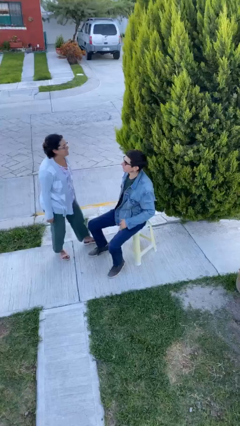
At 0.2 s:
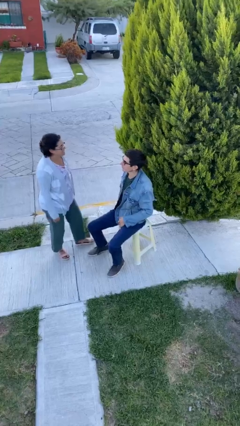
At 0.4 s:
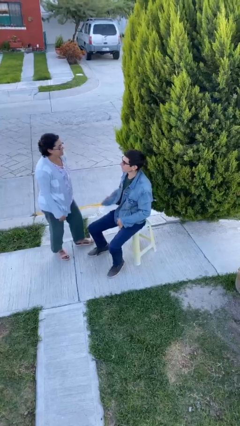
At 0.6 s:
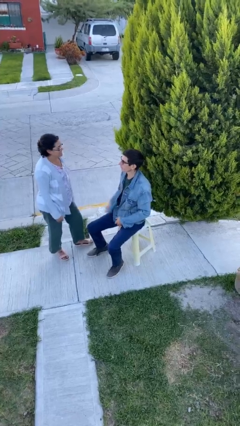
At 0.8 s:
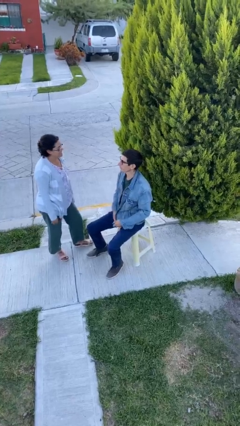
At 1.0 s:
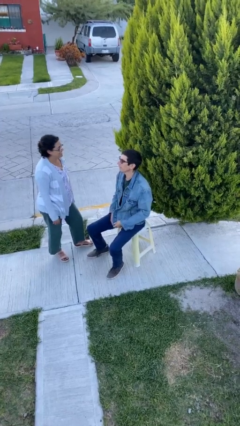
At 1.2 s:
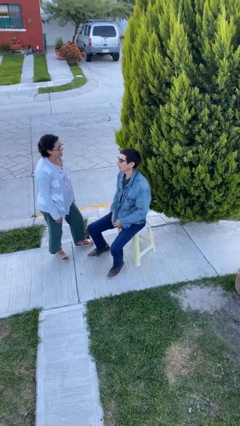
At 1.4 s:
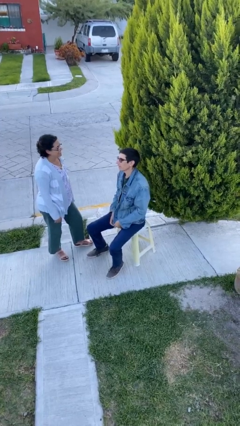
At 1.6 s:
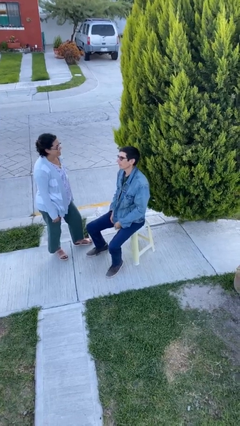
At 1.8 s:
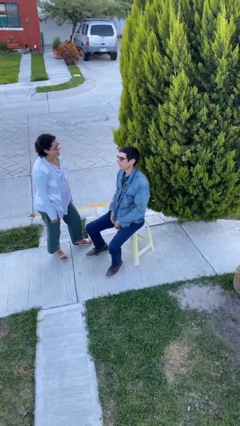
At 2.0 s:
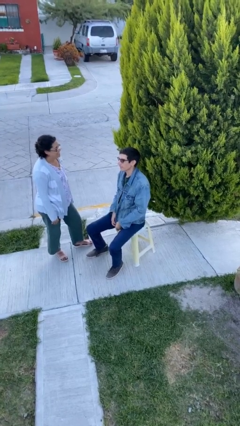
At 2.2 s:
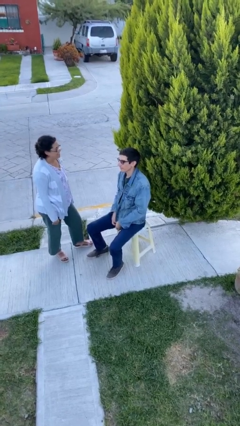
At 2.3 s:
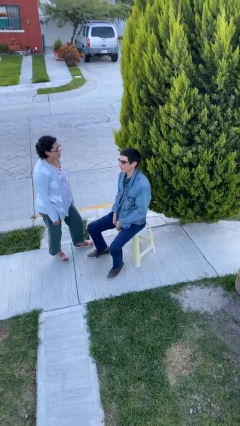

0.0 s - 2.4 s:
person talks to person

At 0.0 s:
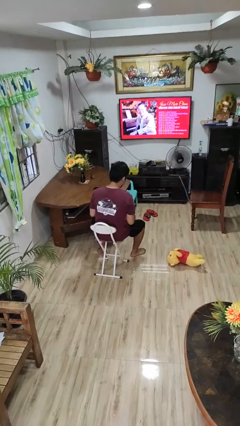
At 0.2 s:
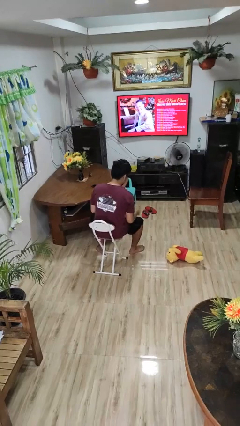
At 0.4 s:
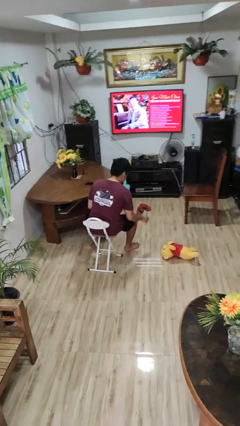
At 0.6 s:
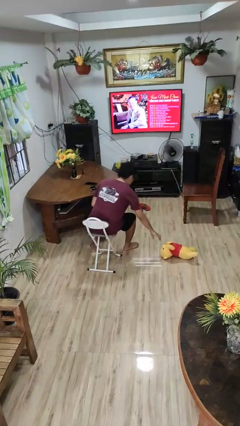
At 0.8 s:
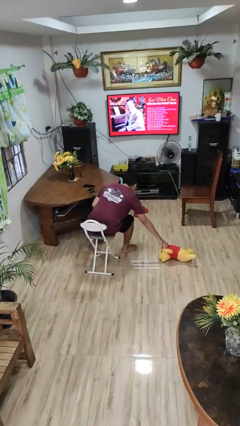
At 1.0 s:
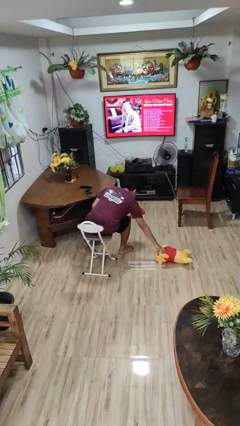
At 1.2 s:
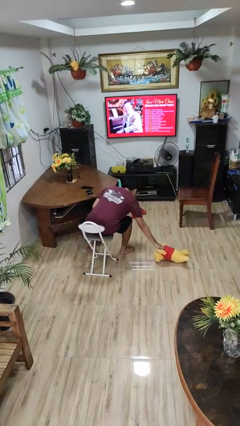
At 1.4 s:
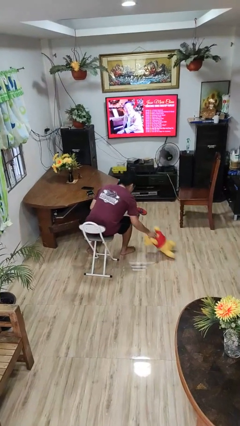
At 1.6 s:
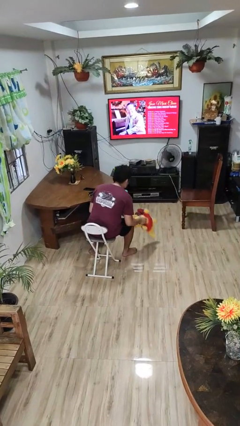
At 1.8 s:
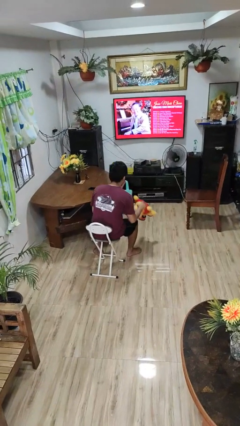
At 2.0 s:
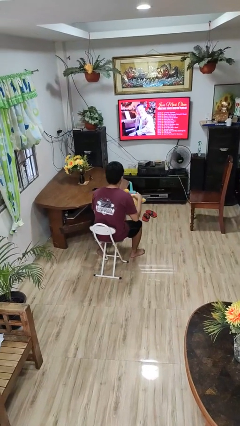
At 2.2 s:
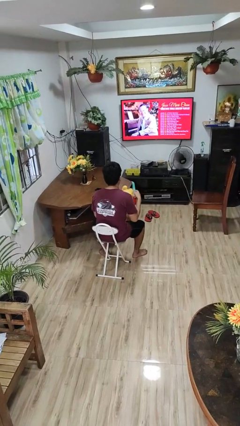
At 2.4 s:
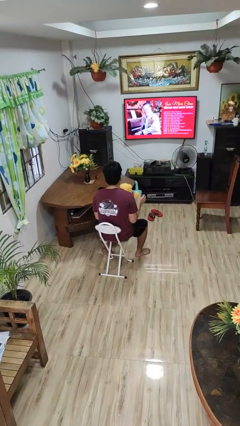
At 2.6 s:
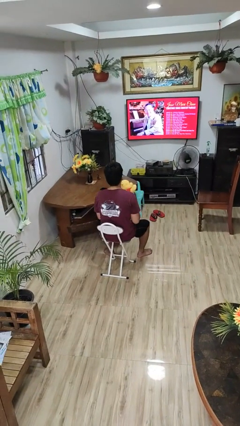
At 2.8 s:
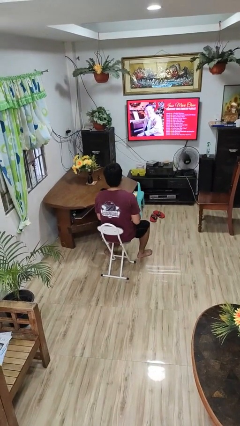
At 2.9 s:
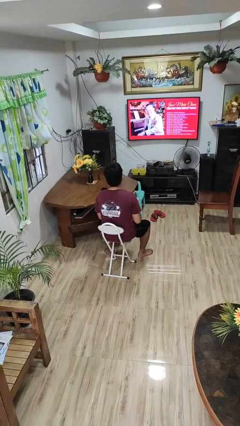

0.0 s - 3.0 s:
person picks up object from floor

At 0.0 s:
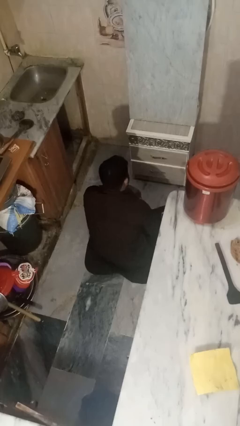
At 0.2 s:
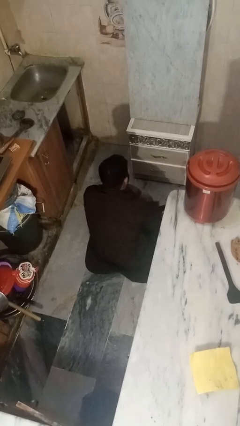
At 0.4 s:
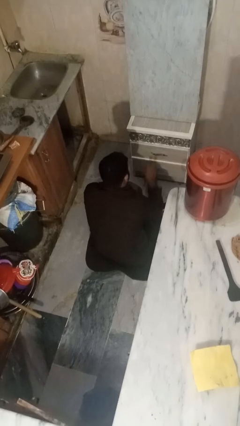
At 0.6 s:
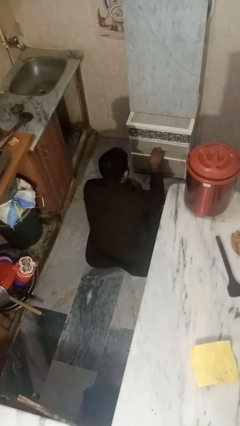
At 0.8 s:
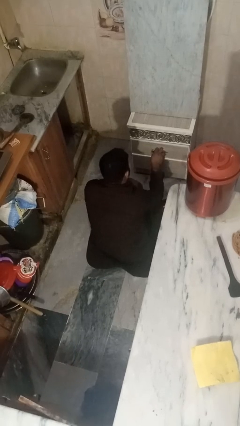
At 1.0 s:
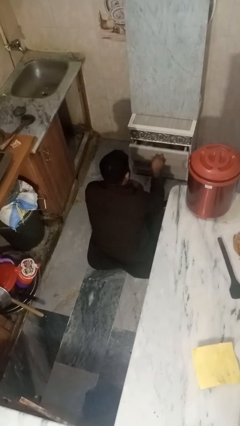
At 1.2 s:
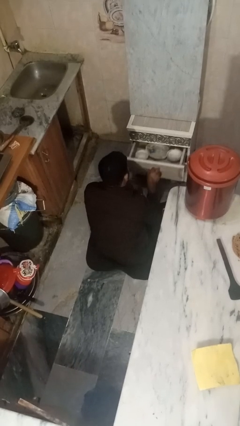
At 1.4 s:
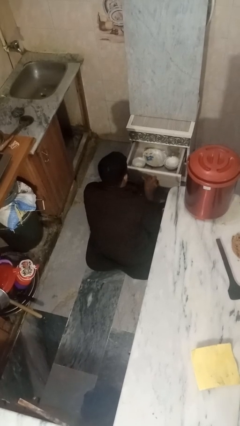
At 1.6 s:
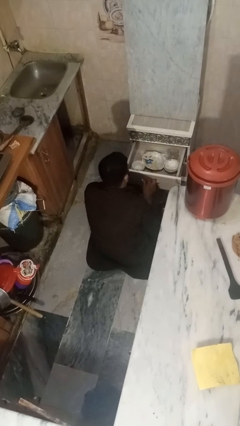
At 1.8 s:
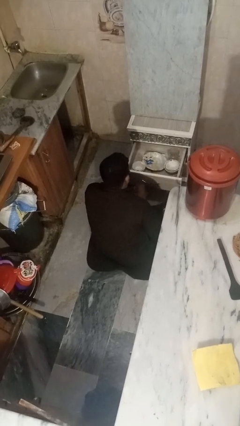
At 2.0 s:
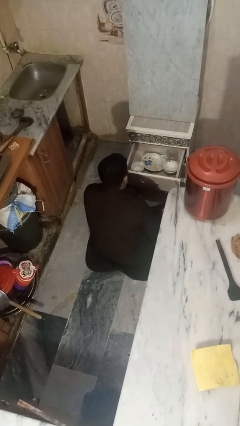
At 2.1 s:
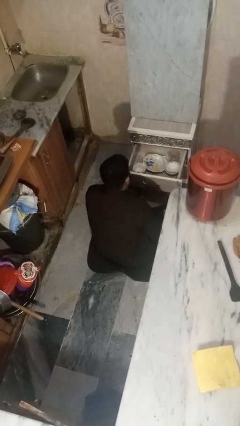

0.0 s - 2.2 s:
person opens kitchen drawer

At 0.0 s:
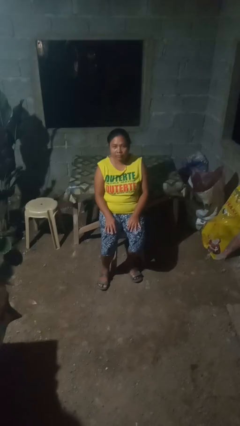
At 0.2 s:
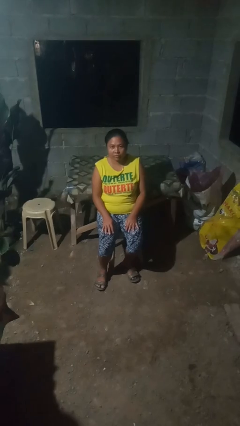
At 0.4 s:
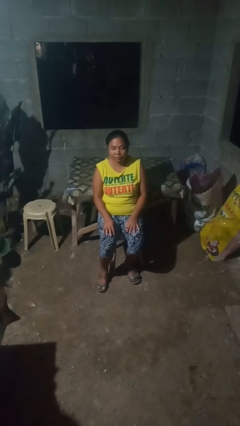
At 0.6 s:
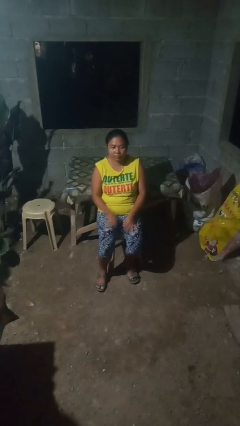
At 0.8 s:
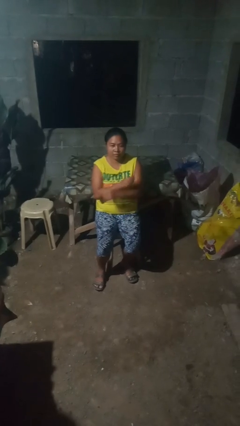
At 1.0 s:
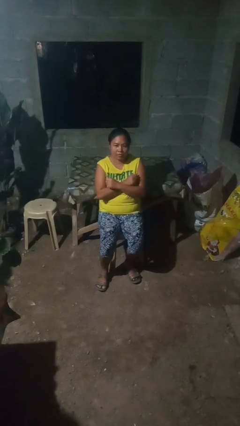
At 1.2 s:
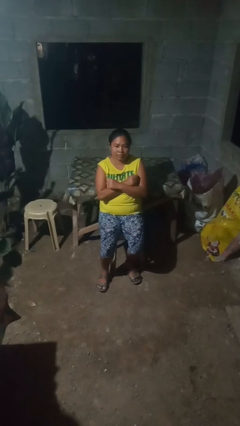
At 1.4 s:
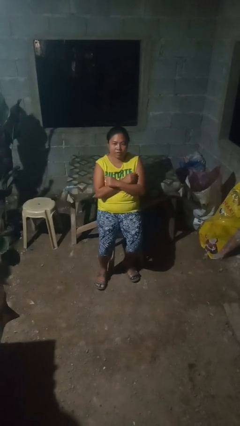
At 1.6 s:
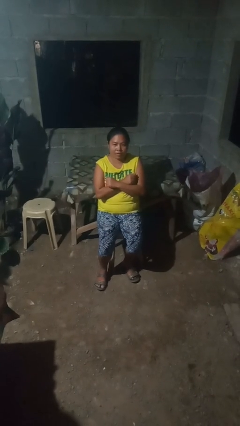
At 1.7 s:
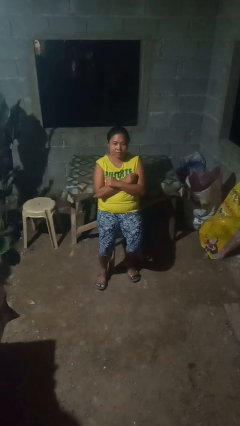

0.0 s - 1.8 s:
person crosses arms

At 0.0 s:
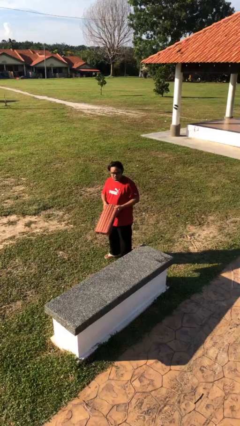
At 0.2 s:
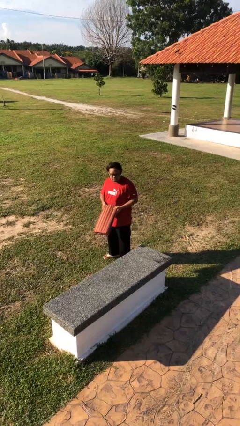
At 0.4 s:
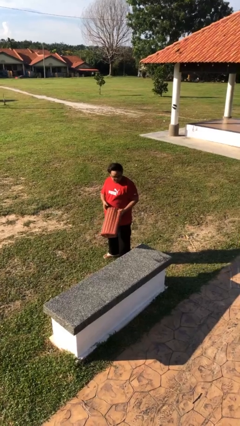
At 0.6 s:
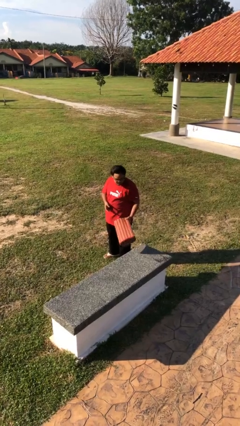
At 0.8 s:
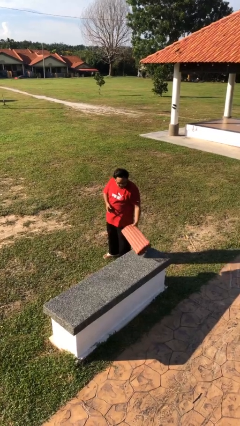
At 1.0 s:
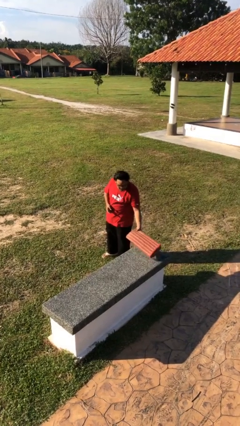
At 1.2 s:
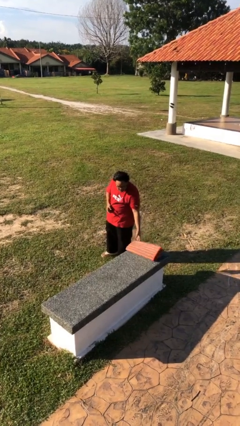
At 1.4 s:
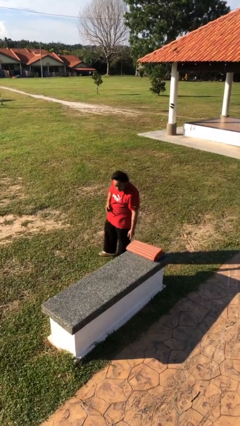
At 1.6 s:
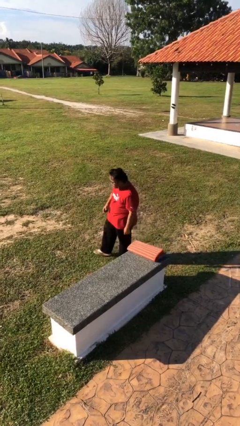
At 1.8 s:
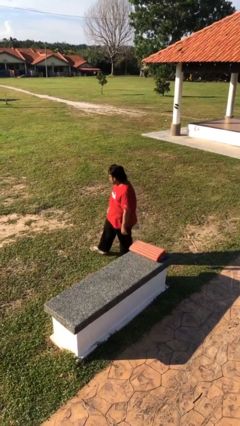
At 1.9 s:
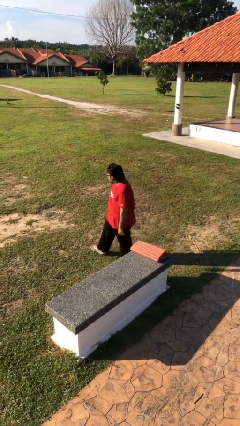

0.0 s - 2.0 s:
person puts down object on table

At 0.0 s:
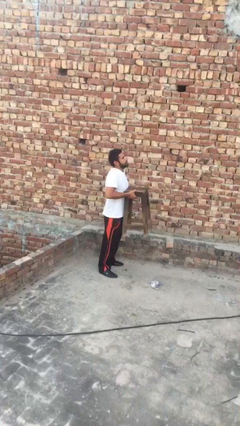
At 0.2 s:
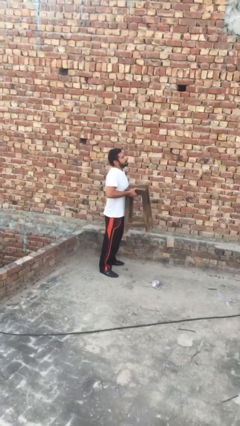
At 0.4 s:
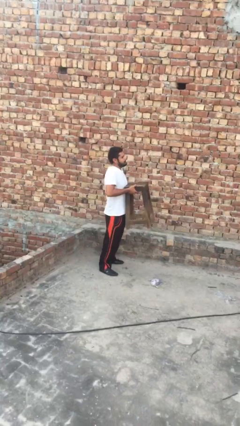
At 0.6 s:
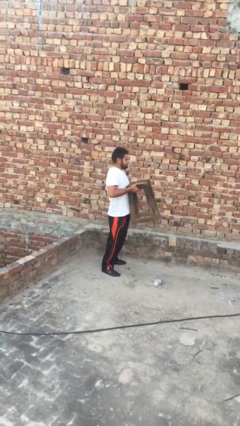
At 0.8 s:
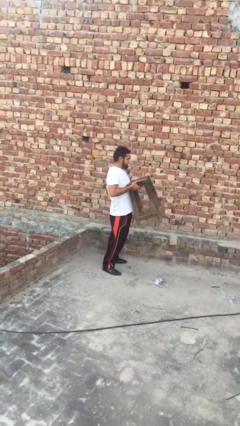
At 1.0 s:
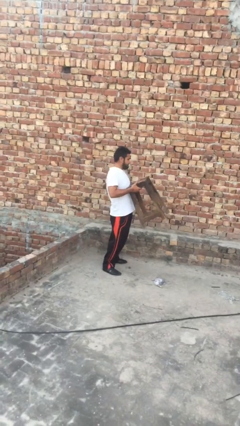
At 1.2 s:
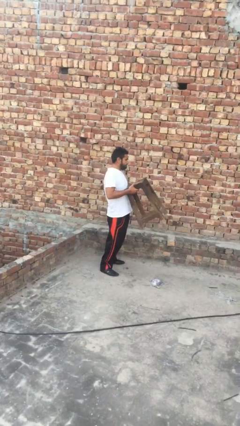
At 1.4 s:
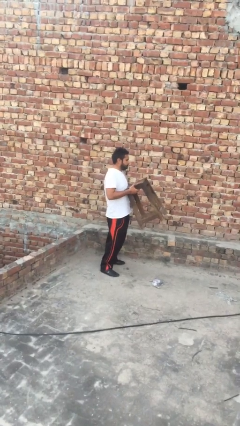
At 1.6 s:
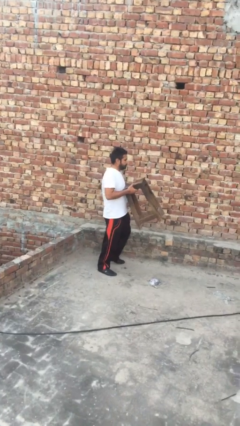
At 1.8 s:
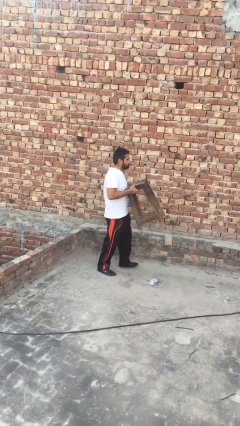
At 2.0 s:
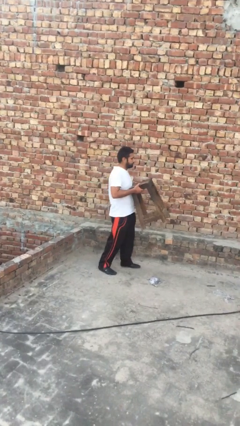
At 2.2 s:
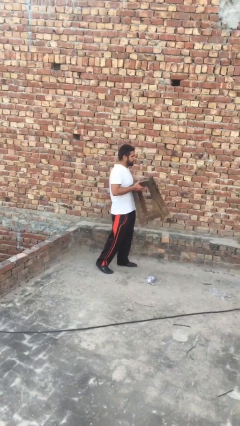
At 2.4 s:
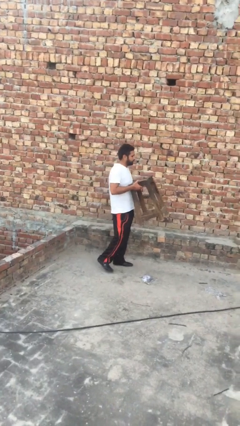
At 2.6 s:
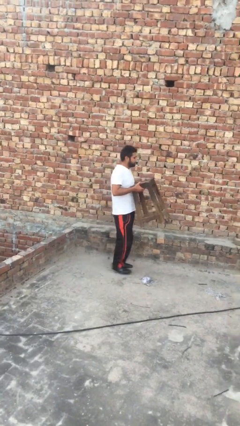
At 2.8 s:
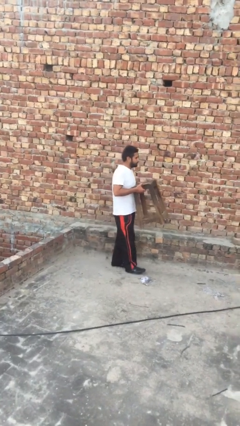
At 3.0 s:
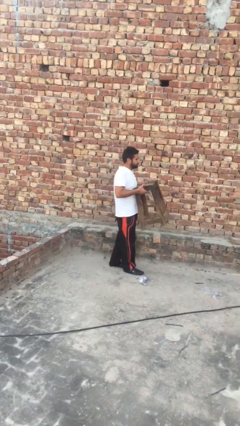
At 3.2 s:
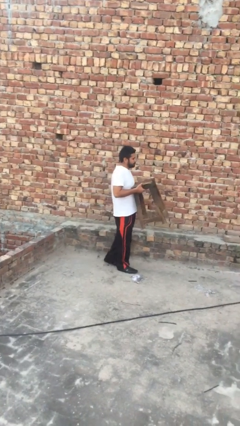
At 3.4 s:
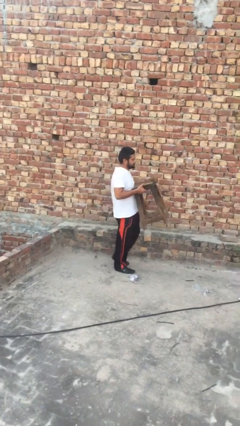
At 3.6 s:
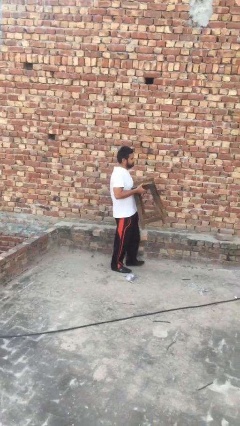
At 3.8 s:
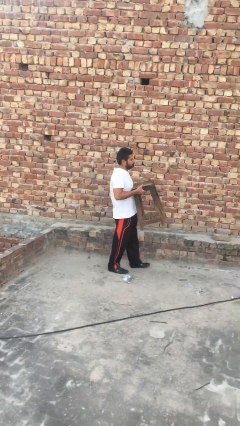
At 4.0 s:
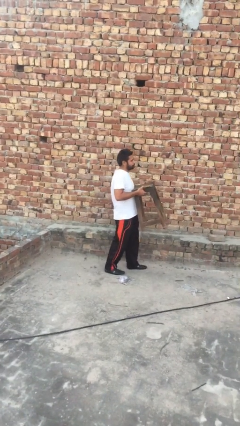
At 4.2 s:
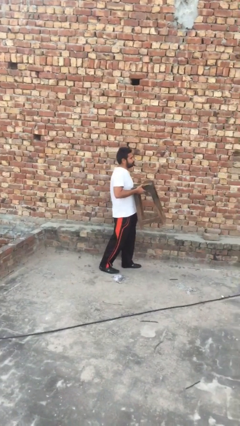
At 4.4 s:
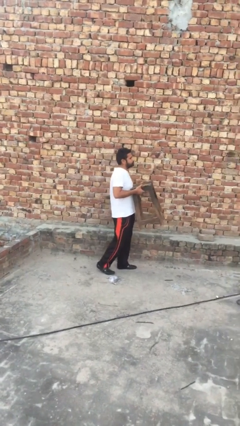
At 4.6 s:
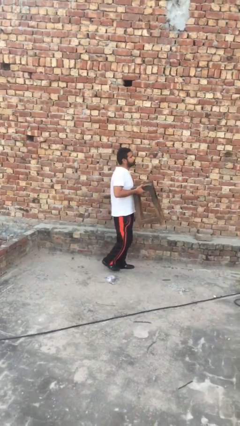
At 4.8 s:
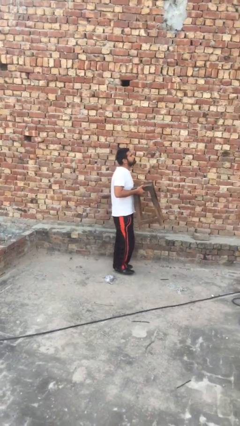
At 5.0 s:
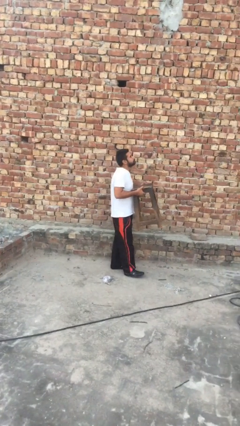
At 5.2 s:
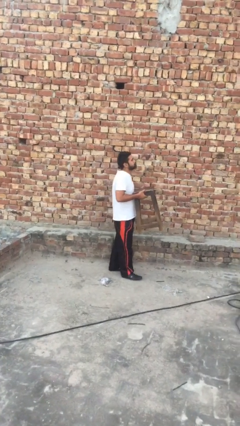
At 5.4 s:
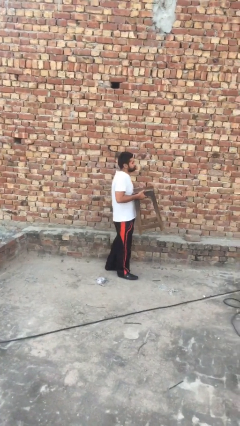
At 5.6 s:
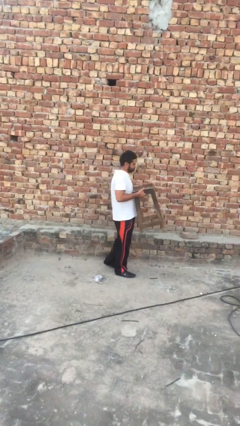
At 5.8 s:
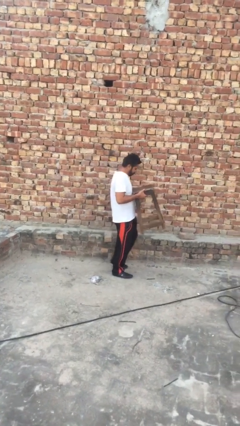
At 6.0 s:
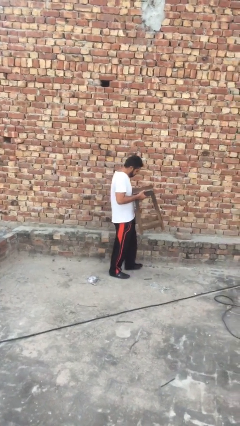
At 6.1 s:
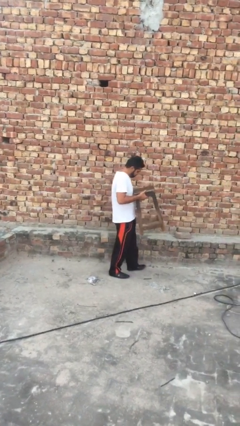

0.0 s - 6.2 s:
person carries heavy object
